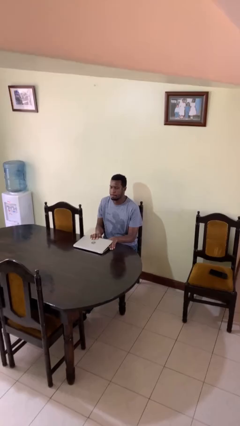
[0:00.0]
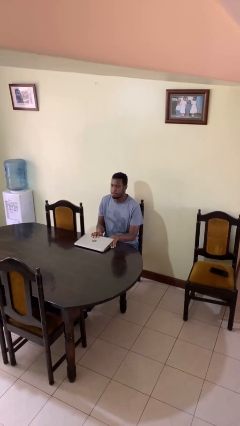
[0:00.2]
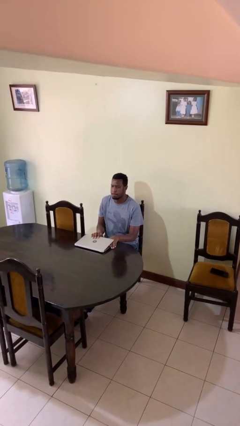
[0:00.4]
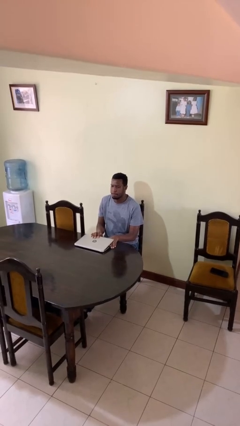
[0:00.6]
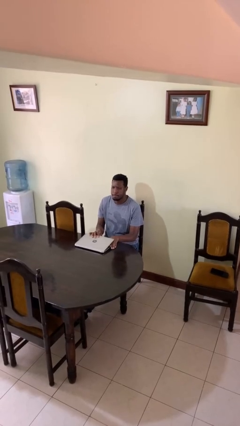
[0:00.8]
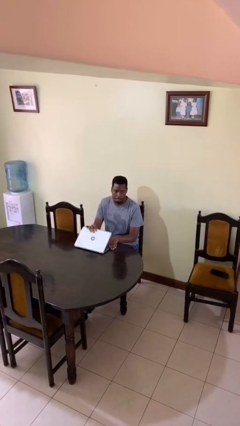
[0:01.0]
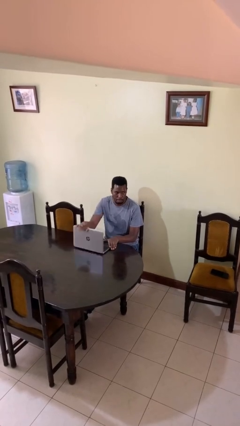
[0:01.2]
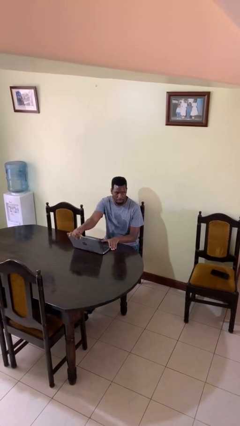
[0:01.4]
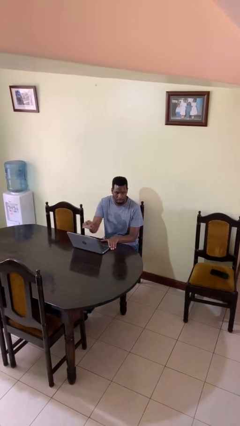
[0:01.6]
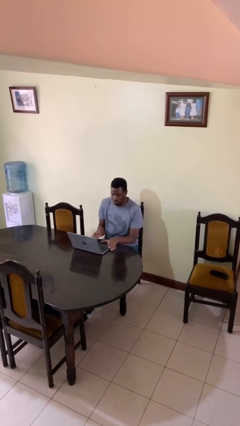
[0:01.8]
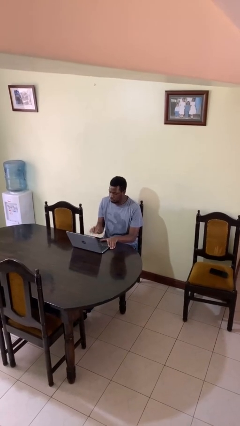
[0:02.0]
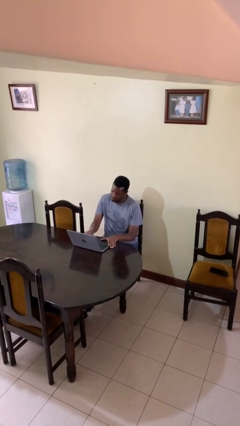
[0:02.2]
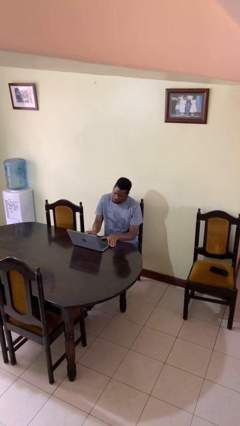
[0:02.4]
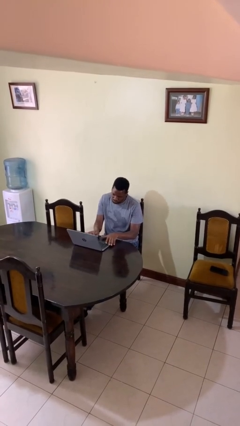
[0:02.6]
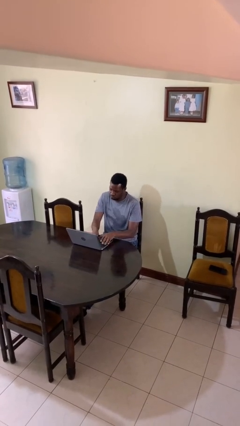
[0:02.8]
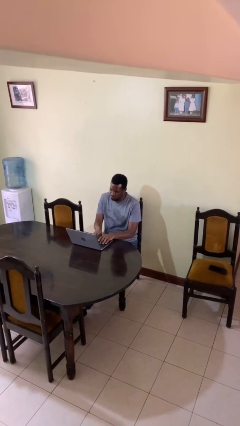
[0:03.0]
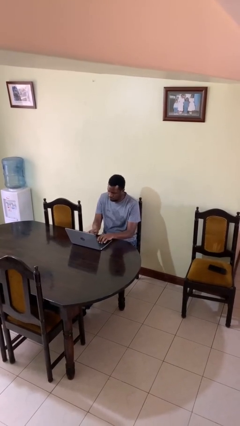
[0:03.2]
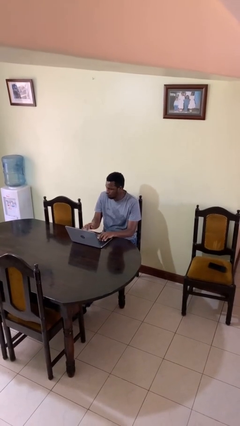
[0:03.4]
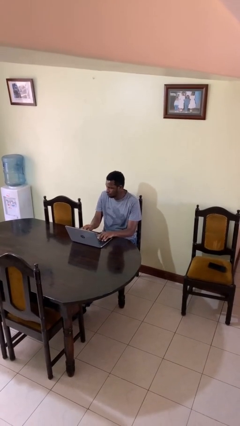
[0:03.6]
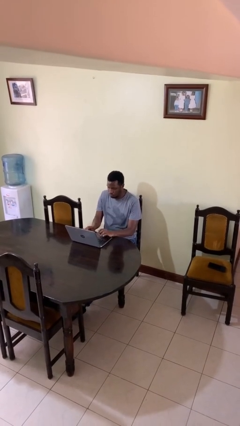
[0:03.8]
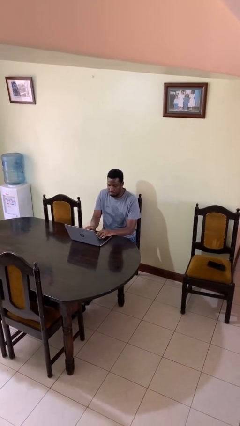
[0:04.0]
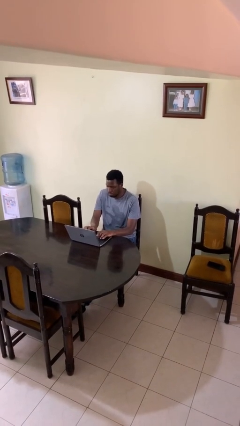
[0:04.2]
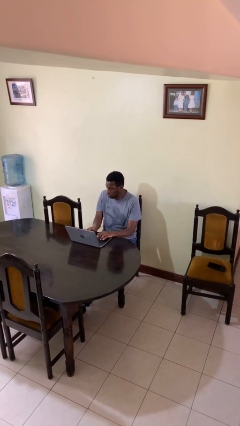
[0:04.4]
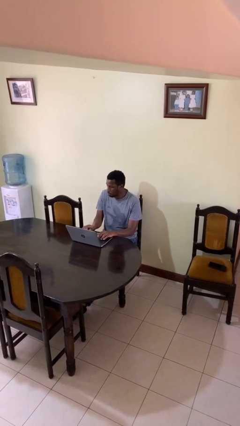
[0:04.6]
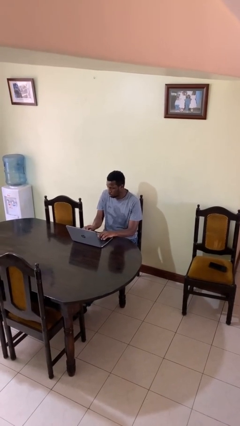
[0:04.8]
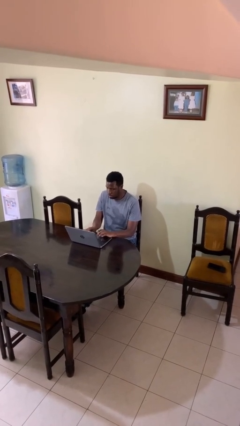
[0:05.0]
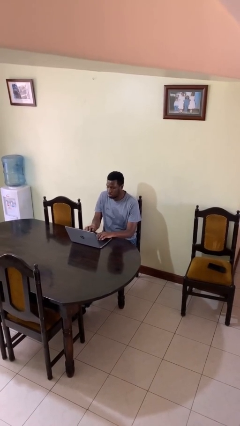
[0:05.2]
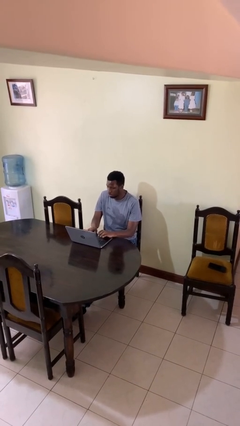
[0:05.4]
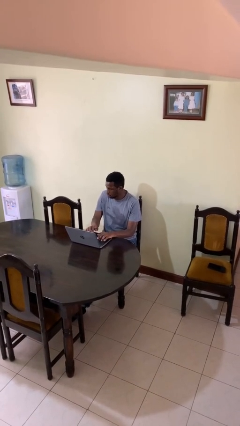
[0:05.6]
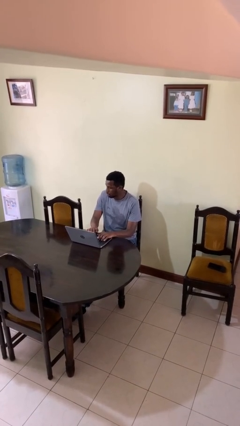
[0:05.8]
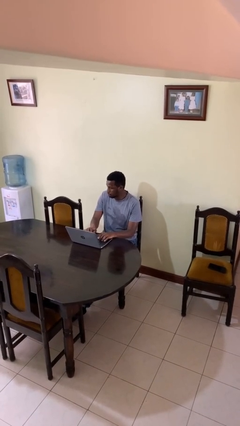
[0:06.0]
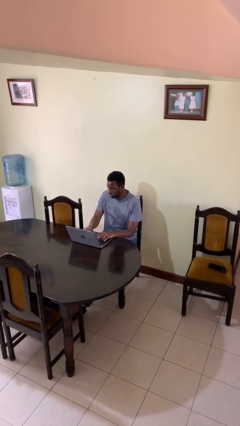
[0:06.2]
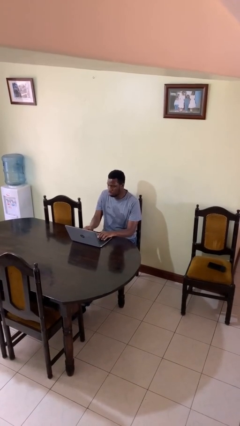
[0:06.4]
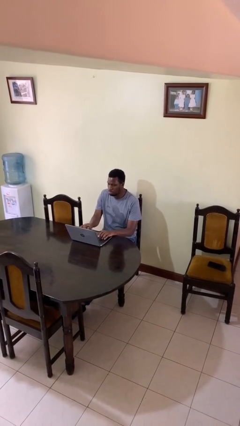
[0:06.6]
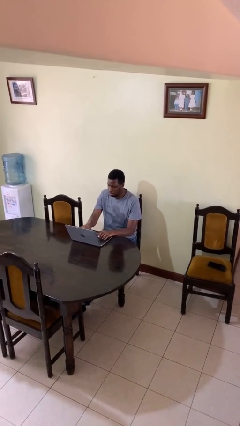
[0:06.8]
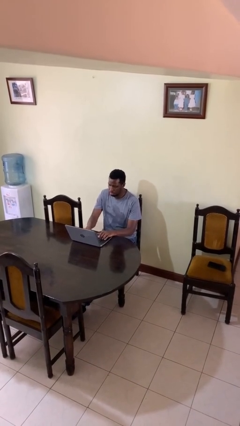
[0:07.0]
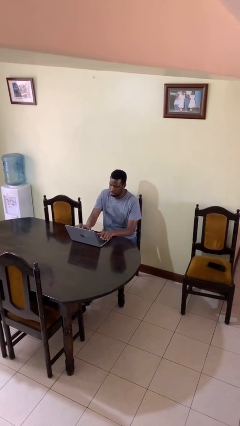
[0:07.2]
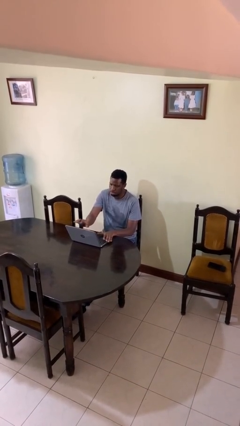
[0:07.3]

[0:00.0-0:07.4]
person interacts with laptop

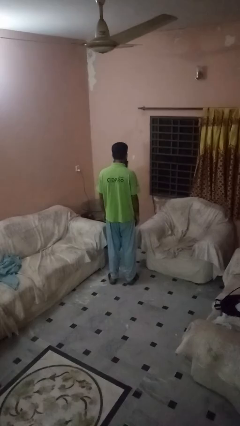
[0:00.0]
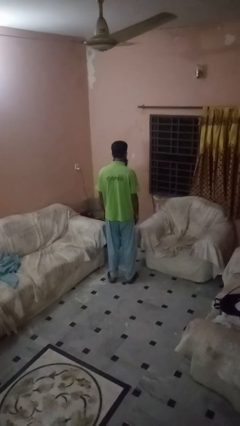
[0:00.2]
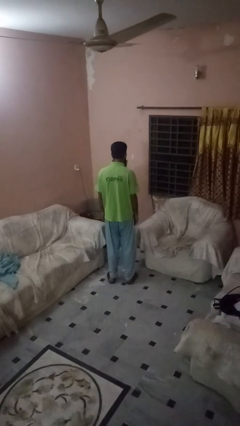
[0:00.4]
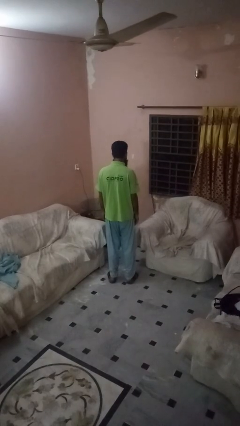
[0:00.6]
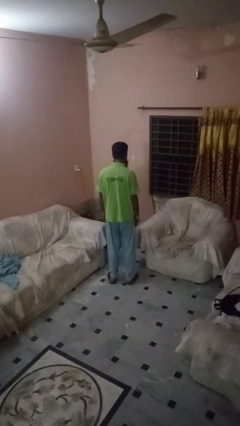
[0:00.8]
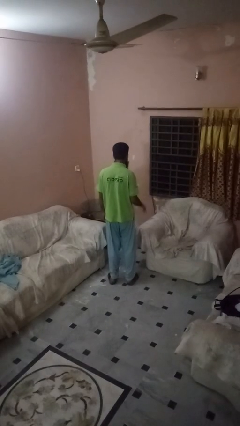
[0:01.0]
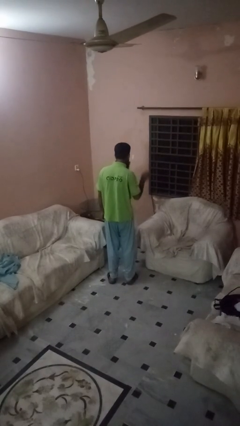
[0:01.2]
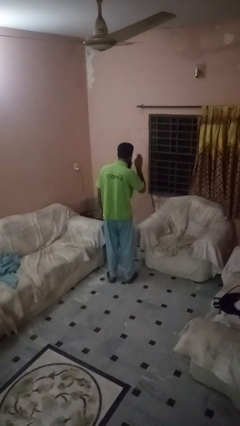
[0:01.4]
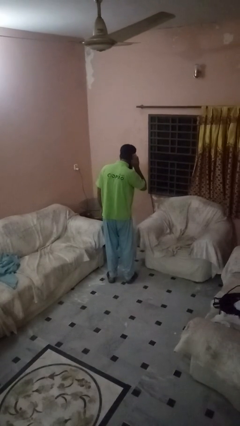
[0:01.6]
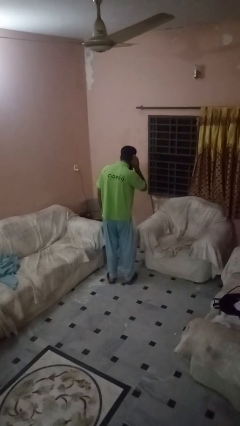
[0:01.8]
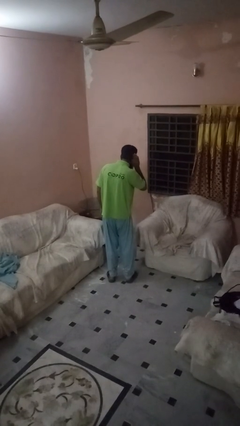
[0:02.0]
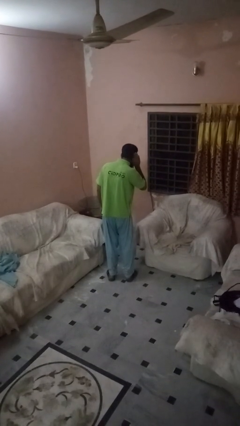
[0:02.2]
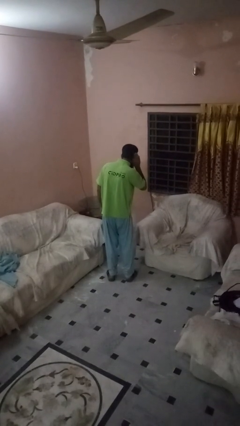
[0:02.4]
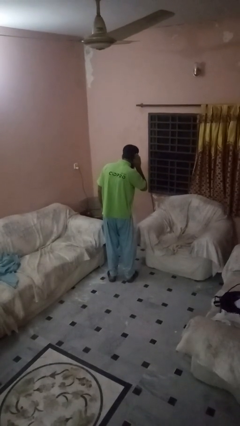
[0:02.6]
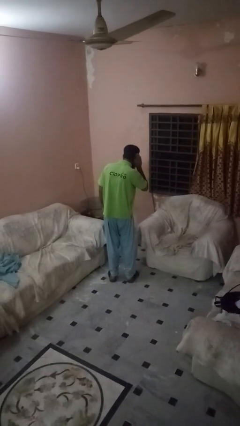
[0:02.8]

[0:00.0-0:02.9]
person gestures listen closely

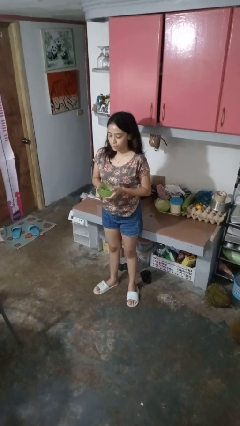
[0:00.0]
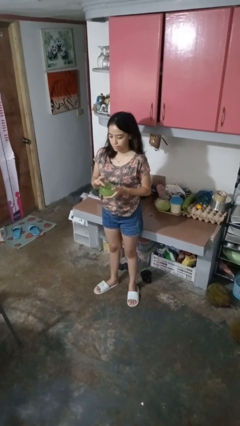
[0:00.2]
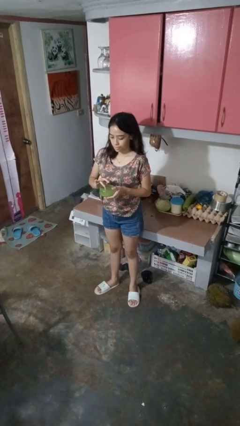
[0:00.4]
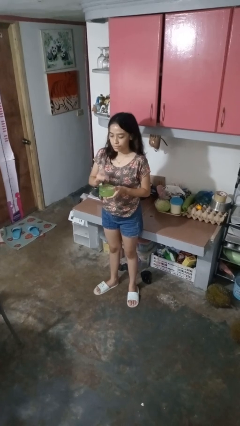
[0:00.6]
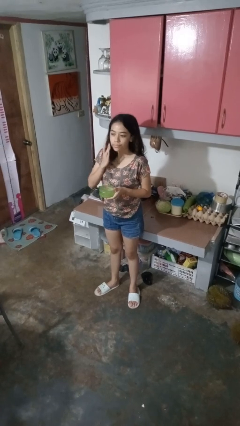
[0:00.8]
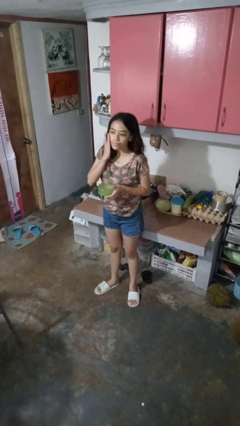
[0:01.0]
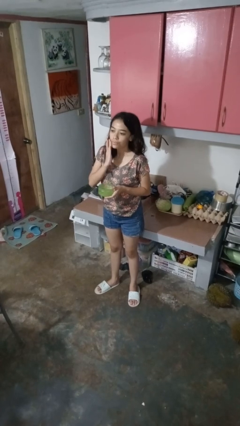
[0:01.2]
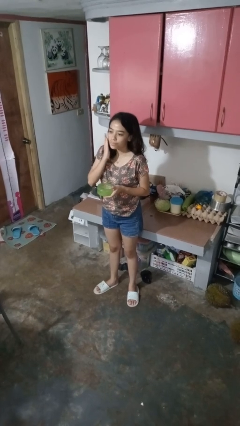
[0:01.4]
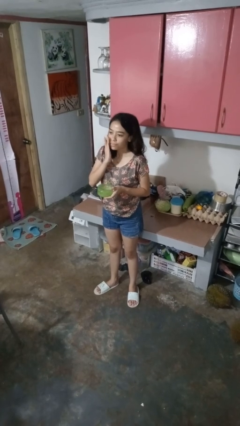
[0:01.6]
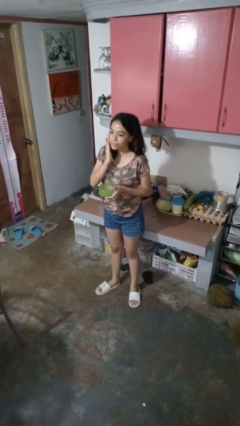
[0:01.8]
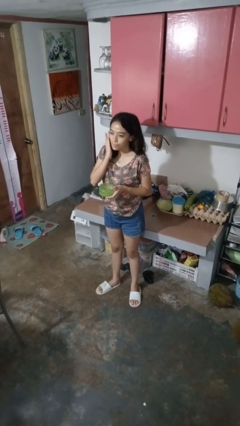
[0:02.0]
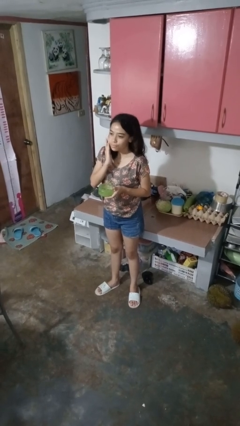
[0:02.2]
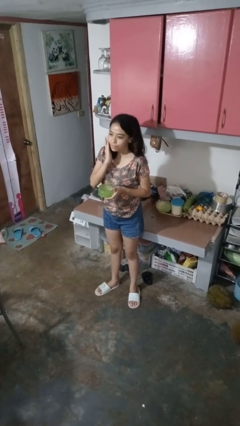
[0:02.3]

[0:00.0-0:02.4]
person applies facial moisturizer

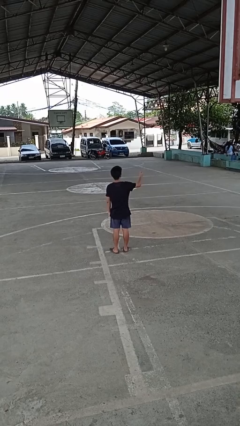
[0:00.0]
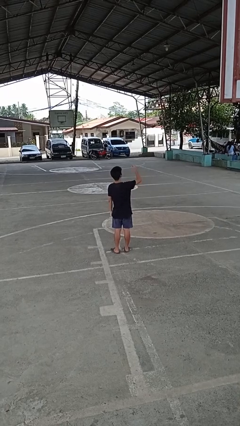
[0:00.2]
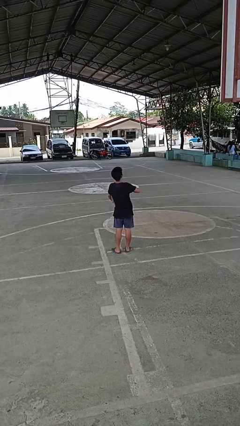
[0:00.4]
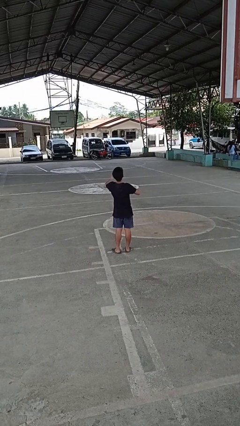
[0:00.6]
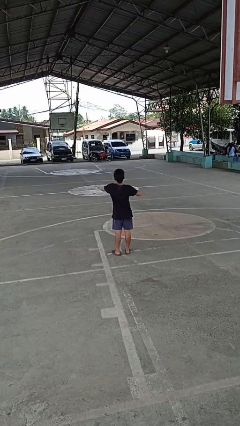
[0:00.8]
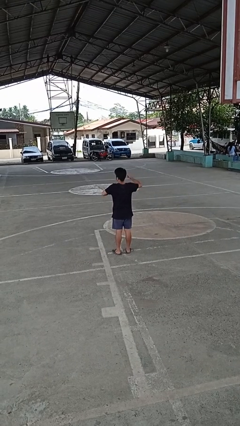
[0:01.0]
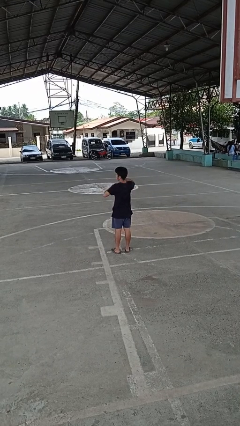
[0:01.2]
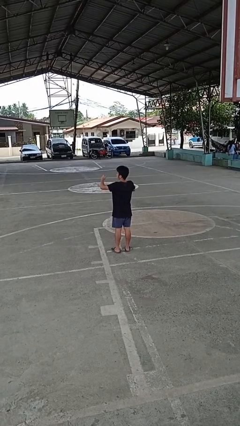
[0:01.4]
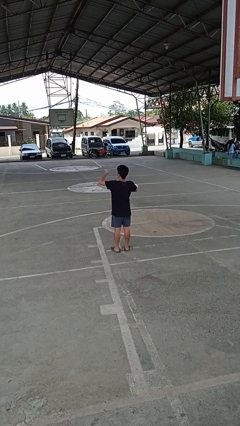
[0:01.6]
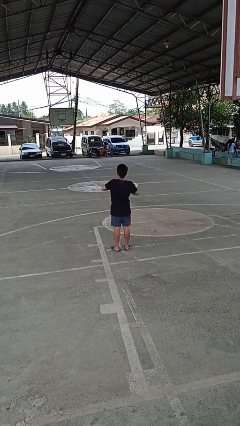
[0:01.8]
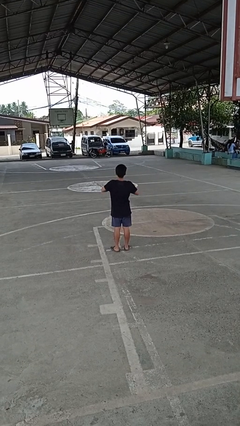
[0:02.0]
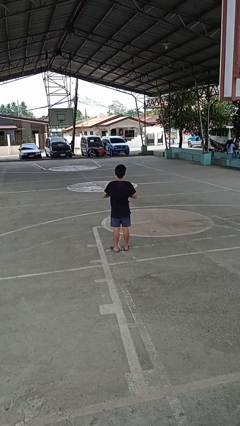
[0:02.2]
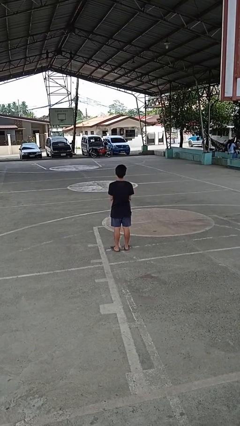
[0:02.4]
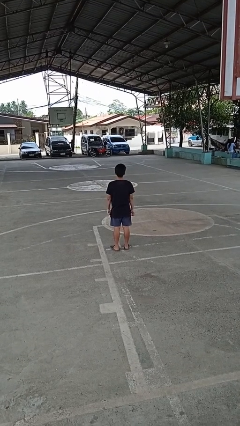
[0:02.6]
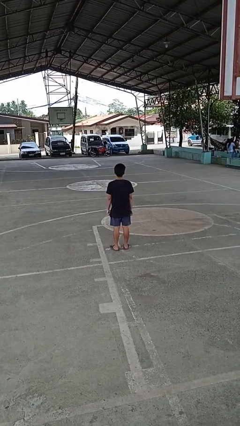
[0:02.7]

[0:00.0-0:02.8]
person drums on chest

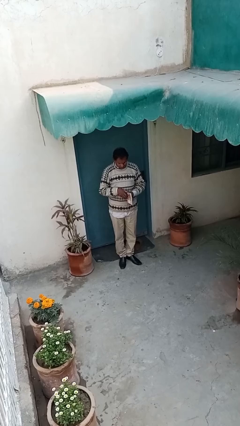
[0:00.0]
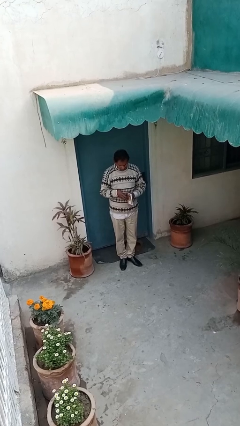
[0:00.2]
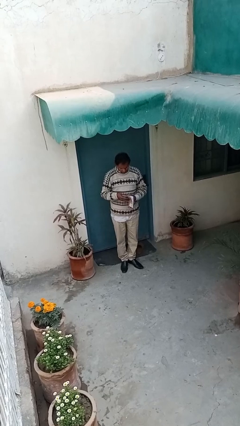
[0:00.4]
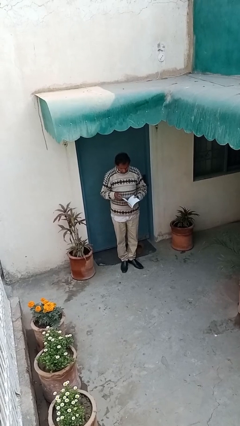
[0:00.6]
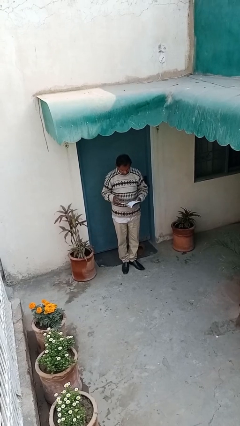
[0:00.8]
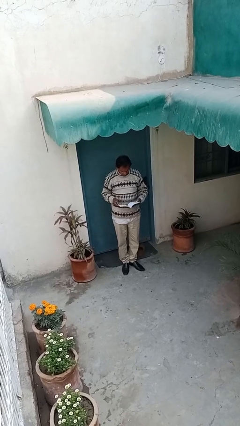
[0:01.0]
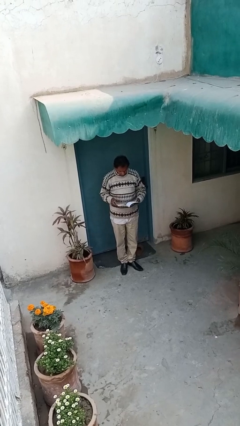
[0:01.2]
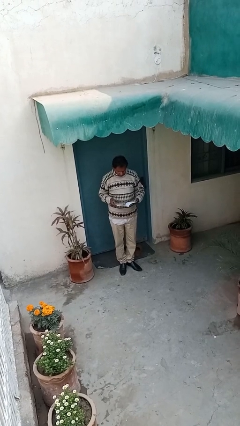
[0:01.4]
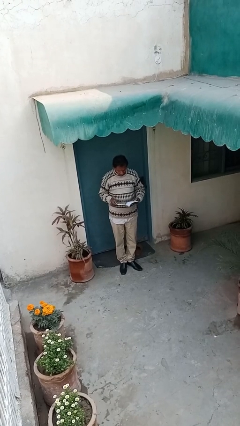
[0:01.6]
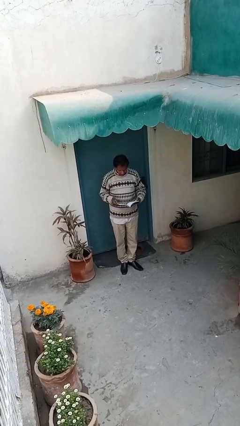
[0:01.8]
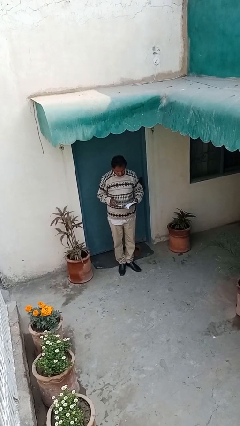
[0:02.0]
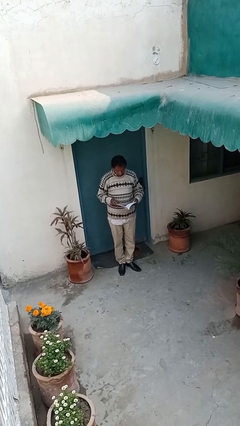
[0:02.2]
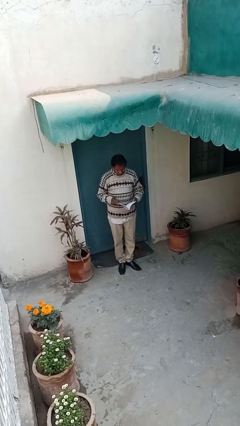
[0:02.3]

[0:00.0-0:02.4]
person reads document
